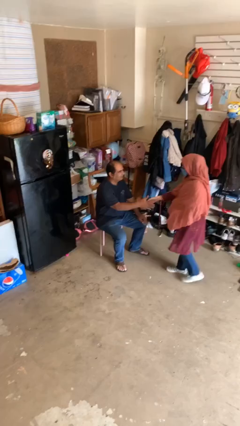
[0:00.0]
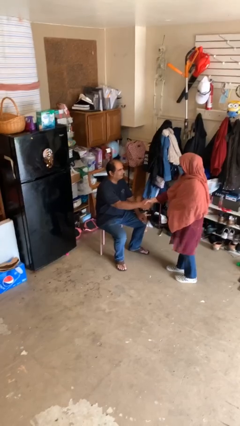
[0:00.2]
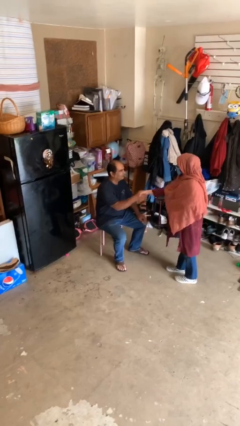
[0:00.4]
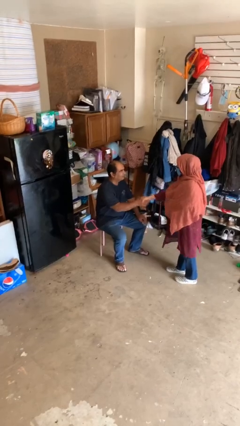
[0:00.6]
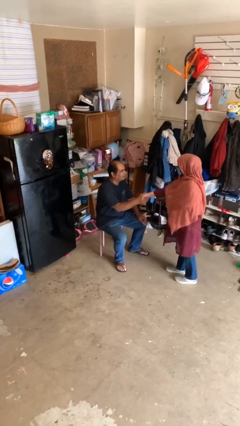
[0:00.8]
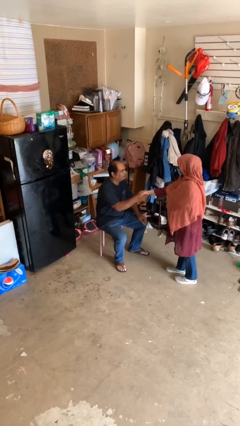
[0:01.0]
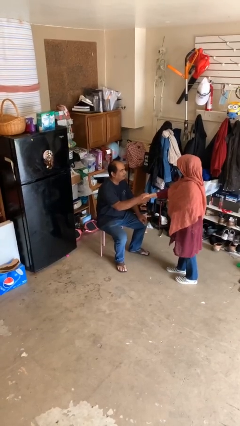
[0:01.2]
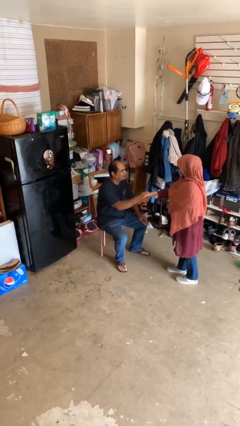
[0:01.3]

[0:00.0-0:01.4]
person shakes hand

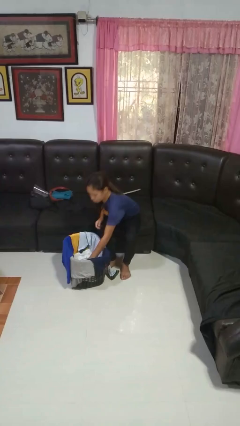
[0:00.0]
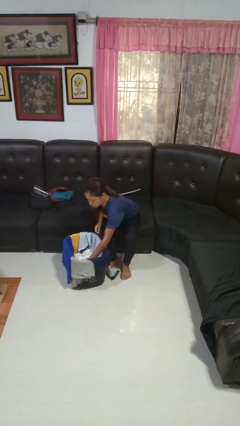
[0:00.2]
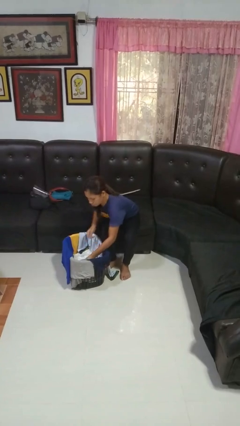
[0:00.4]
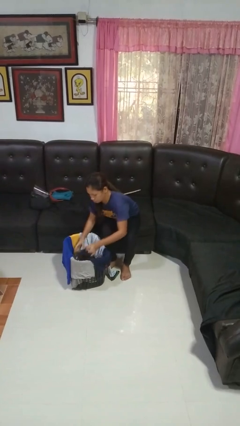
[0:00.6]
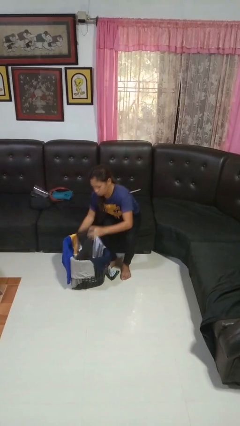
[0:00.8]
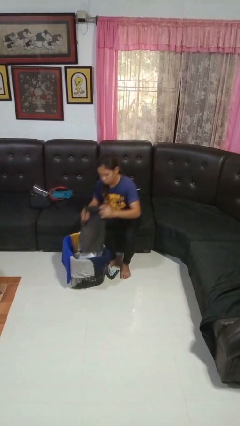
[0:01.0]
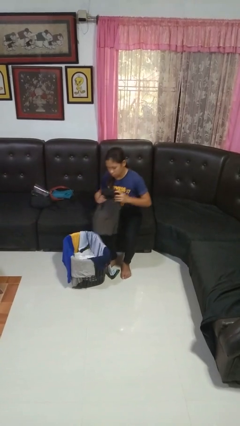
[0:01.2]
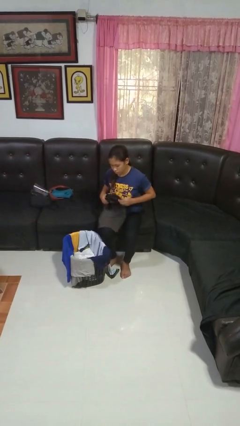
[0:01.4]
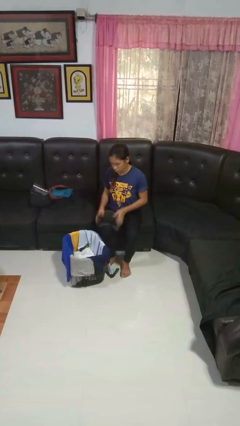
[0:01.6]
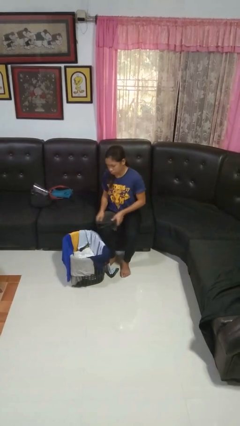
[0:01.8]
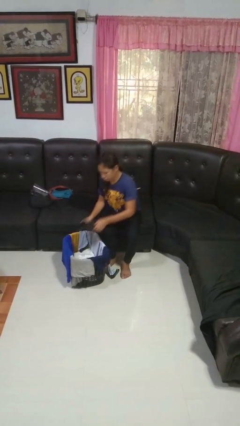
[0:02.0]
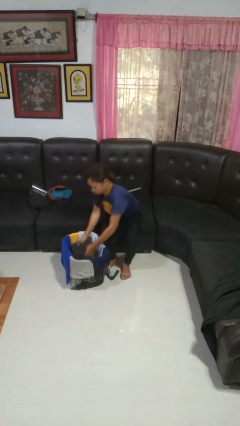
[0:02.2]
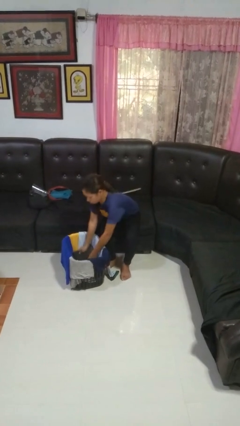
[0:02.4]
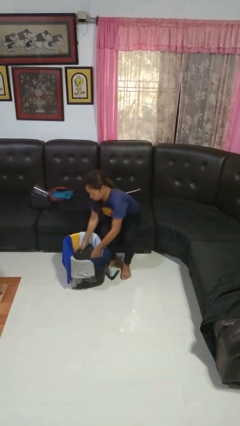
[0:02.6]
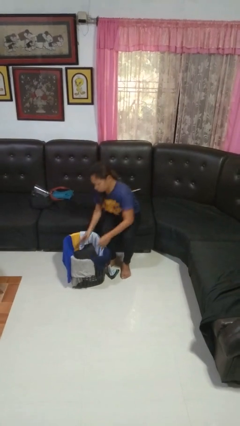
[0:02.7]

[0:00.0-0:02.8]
person folds pants

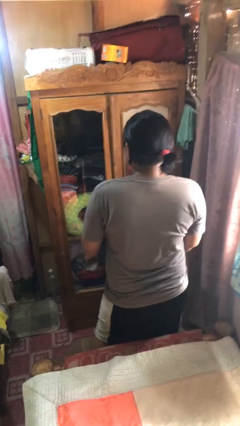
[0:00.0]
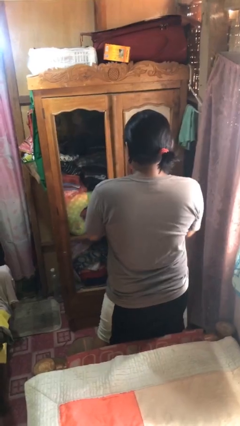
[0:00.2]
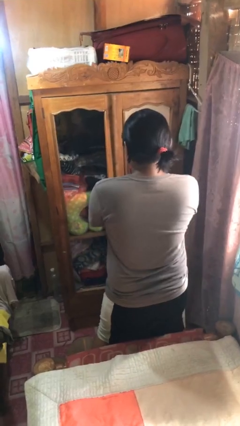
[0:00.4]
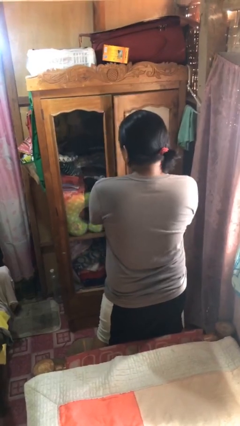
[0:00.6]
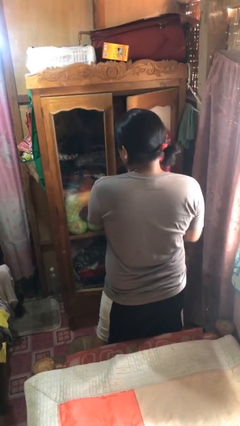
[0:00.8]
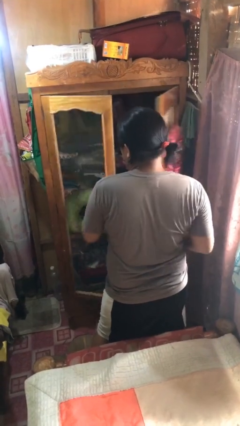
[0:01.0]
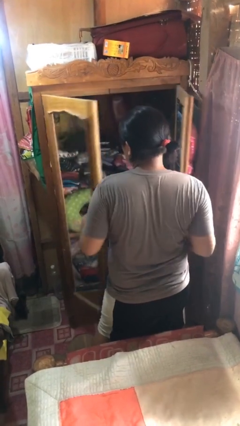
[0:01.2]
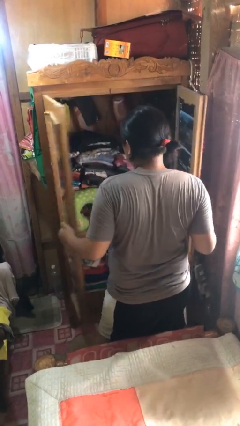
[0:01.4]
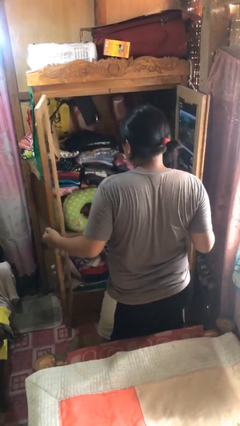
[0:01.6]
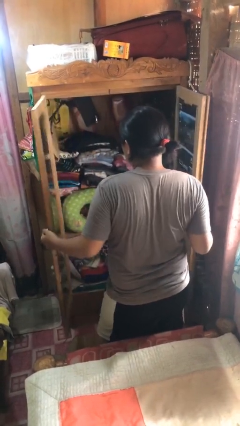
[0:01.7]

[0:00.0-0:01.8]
person opens closet door

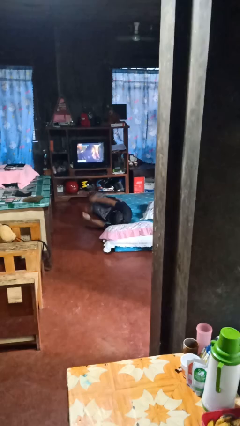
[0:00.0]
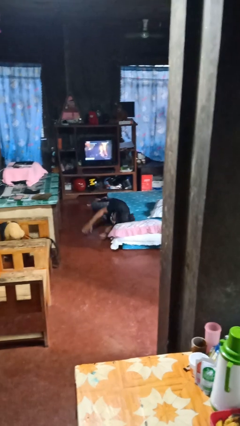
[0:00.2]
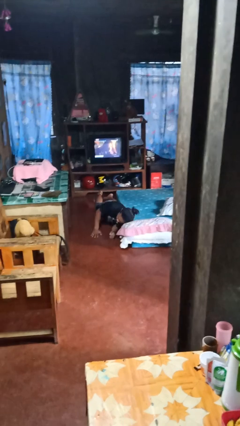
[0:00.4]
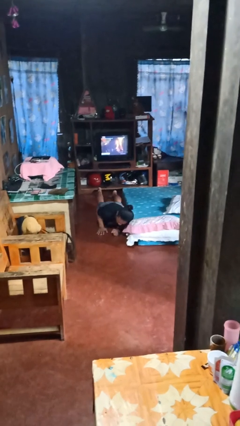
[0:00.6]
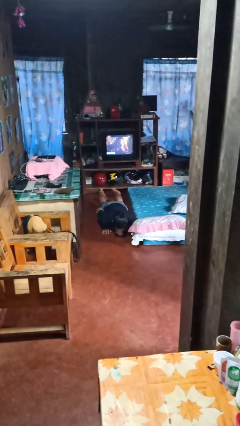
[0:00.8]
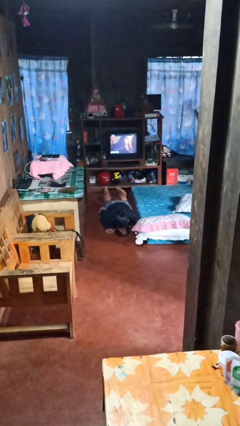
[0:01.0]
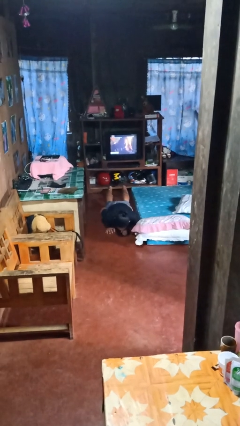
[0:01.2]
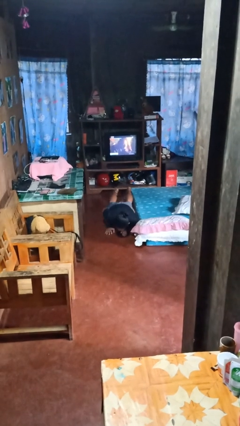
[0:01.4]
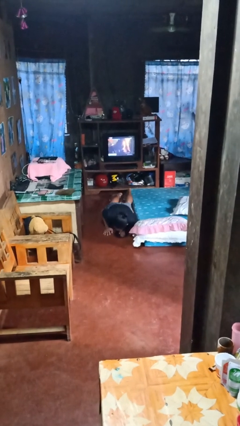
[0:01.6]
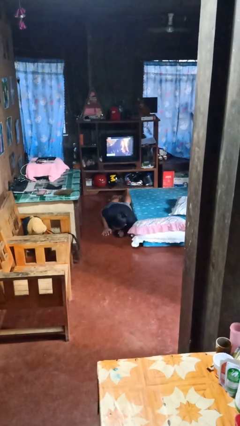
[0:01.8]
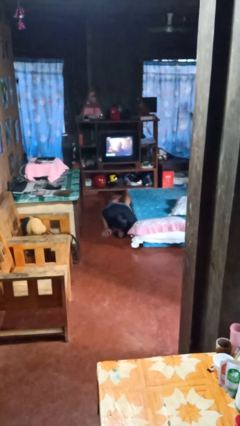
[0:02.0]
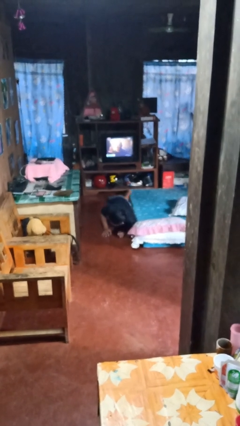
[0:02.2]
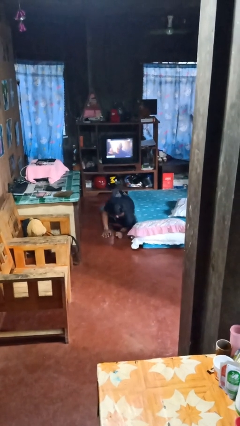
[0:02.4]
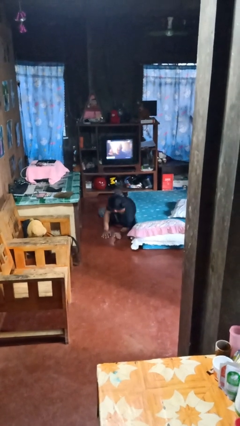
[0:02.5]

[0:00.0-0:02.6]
person falls from bed

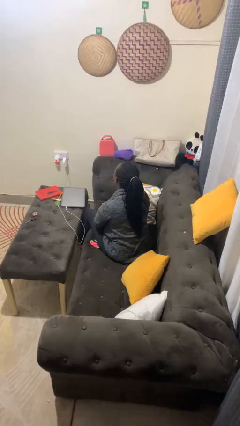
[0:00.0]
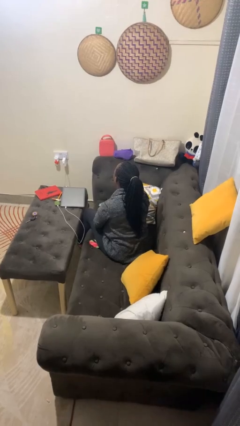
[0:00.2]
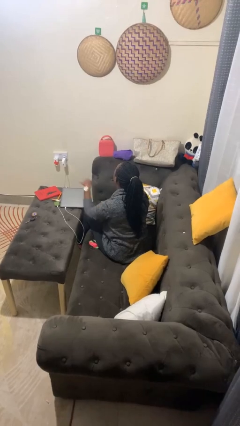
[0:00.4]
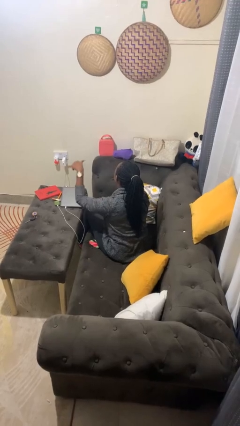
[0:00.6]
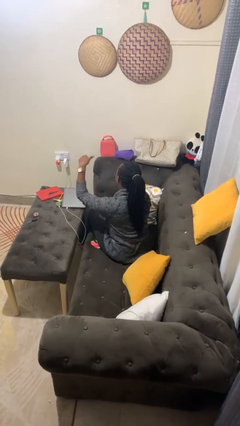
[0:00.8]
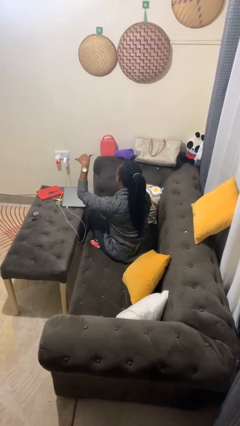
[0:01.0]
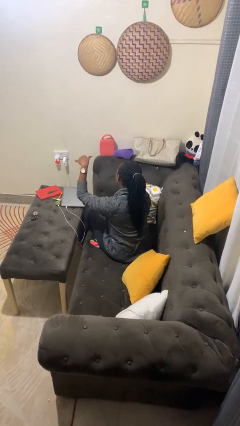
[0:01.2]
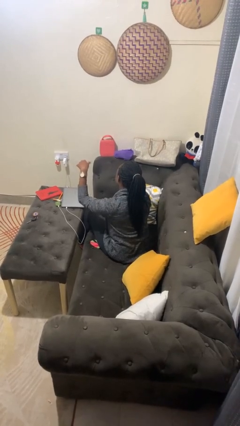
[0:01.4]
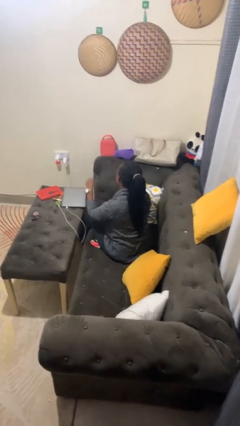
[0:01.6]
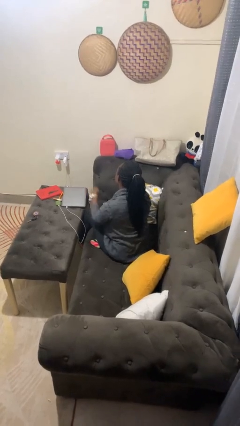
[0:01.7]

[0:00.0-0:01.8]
person gestures hang loose

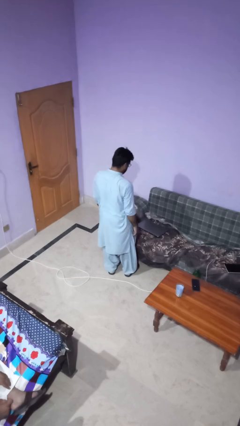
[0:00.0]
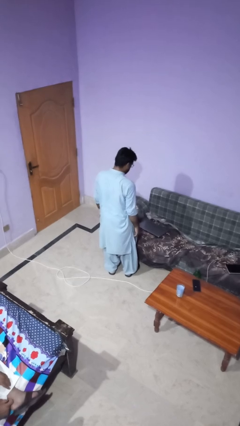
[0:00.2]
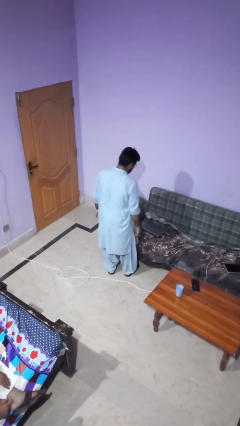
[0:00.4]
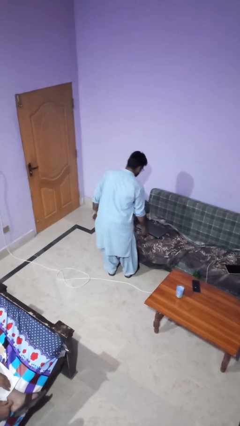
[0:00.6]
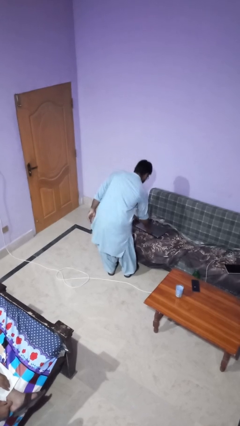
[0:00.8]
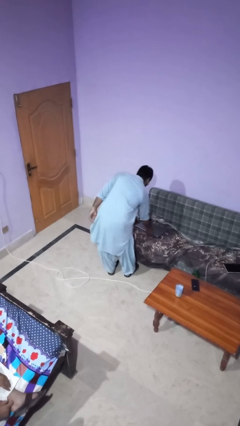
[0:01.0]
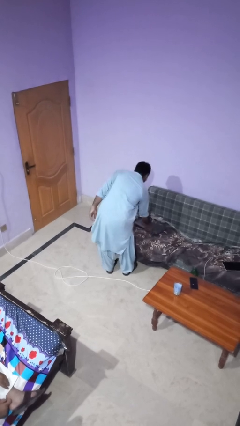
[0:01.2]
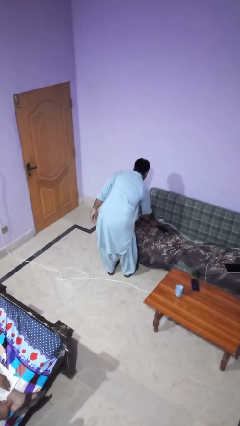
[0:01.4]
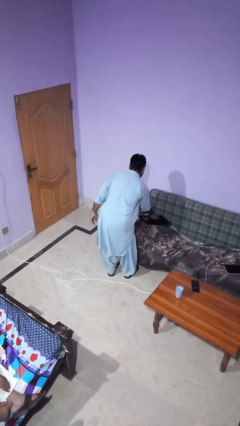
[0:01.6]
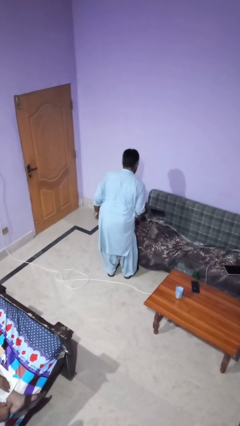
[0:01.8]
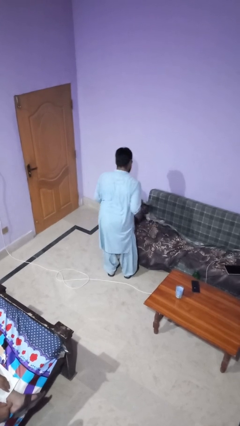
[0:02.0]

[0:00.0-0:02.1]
person picks up object from couch

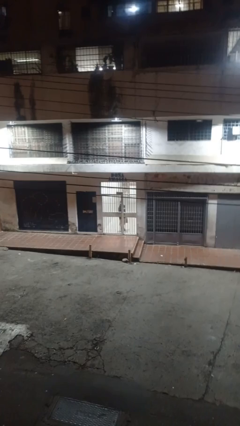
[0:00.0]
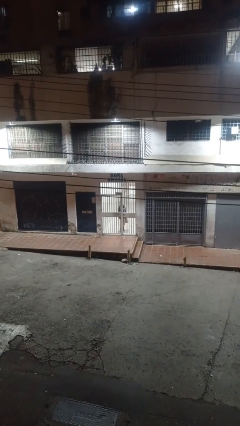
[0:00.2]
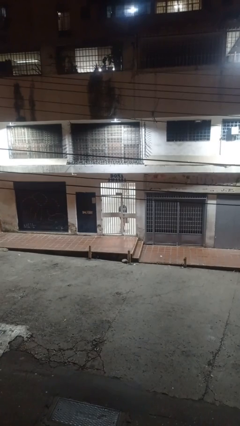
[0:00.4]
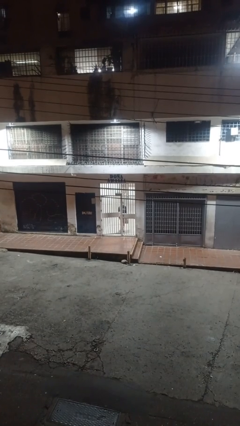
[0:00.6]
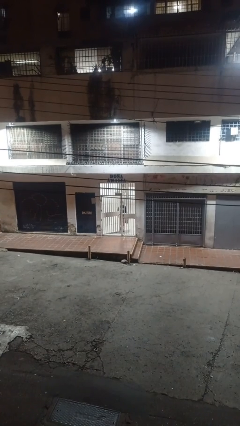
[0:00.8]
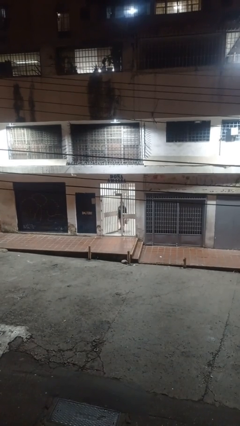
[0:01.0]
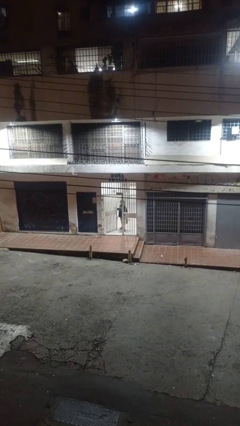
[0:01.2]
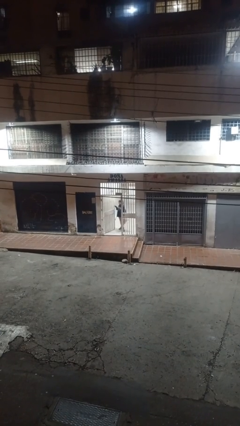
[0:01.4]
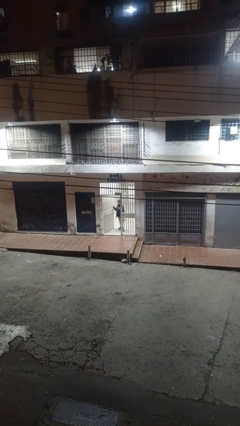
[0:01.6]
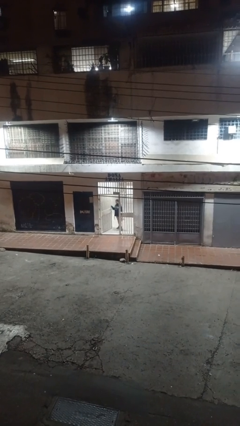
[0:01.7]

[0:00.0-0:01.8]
person opens gate

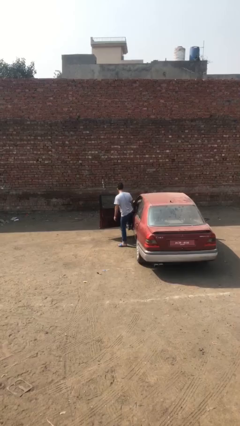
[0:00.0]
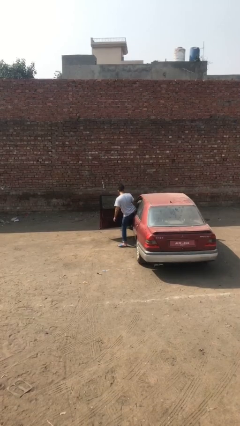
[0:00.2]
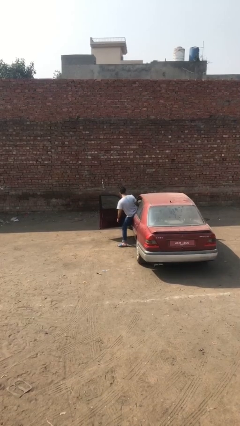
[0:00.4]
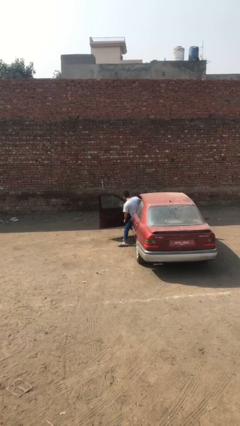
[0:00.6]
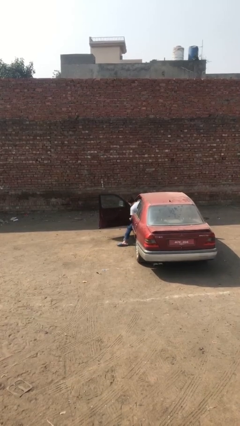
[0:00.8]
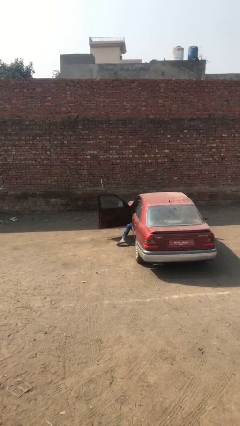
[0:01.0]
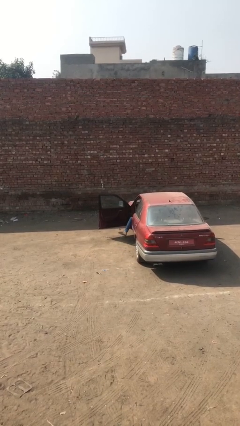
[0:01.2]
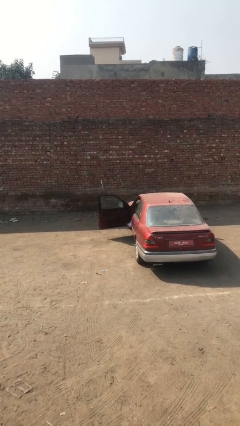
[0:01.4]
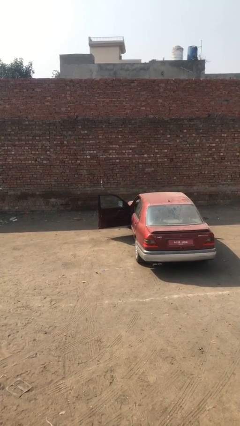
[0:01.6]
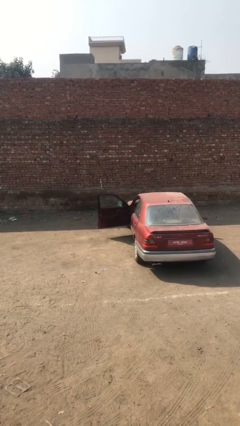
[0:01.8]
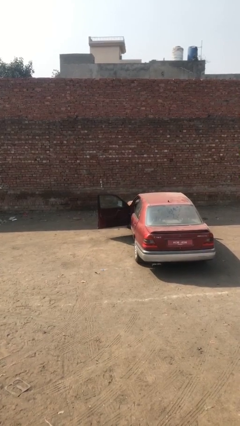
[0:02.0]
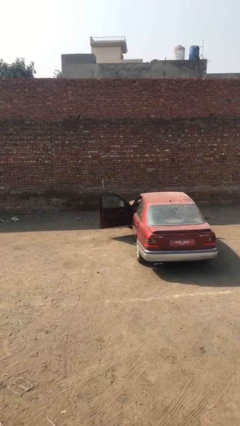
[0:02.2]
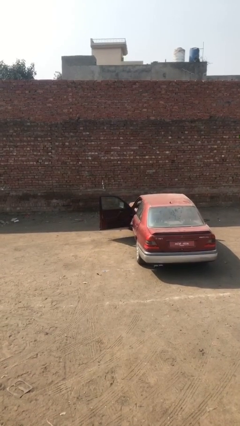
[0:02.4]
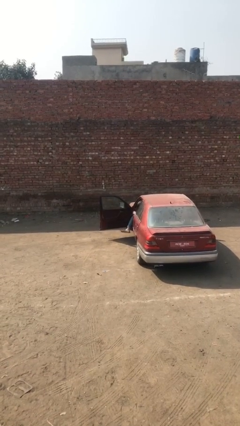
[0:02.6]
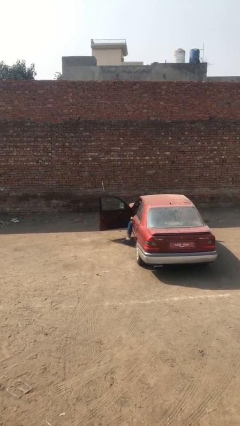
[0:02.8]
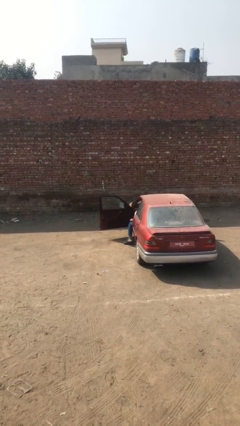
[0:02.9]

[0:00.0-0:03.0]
person enters car
